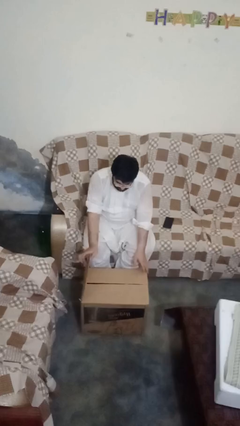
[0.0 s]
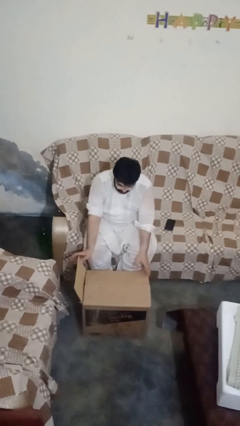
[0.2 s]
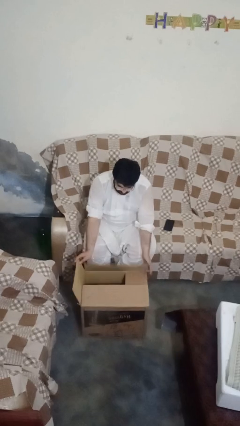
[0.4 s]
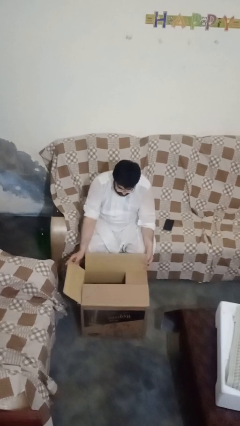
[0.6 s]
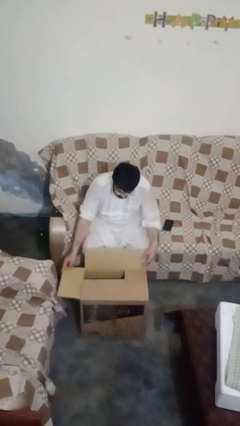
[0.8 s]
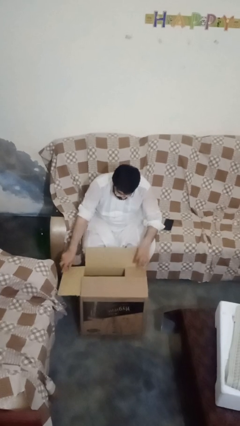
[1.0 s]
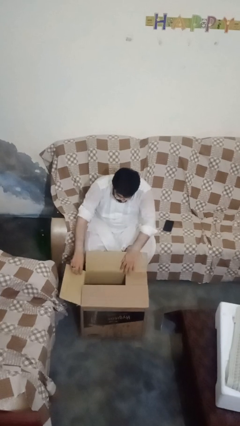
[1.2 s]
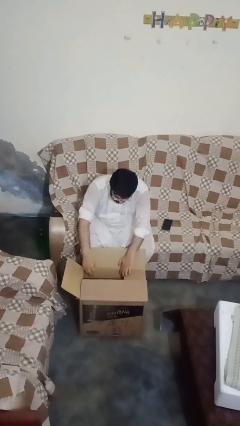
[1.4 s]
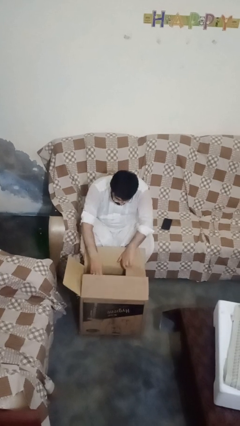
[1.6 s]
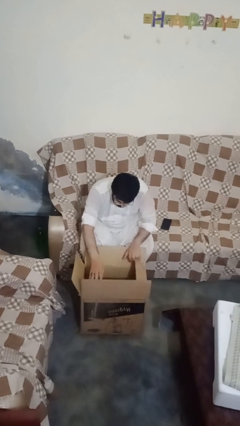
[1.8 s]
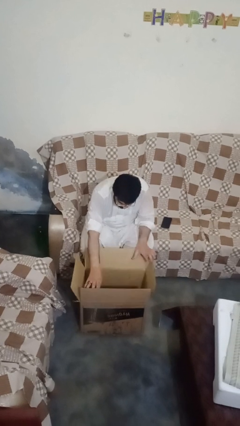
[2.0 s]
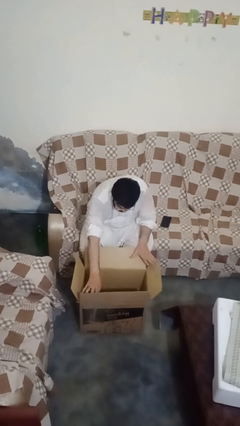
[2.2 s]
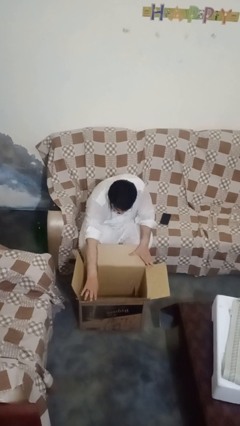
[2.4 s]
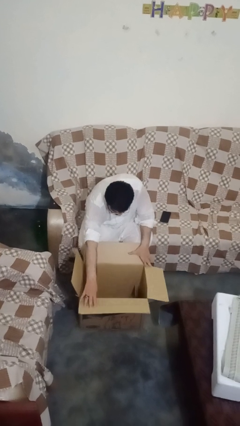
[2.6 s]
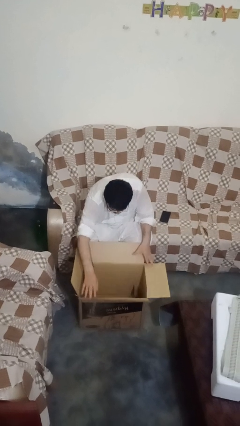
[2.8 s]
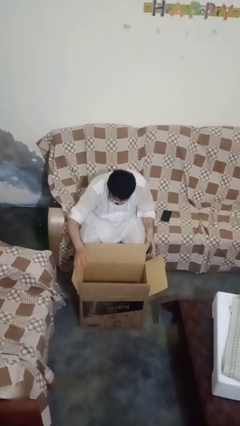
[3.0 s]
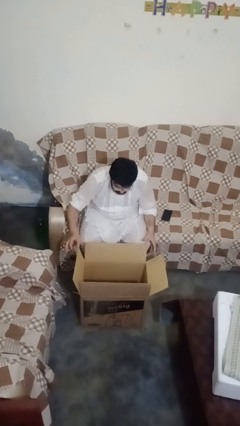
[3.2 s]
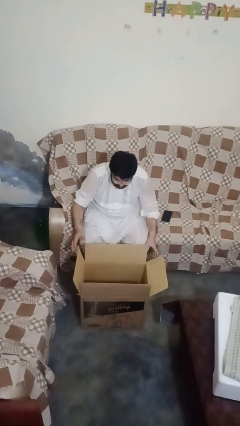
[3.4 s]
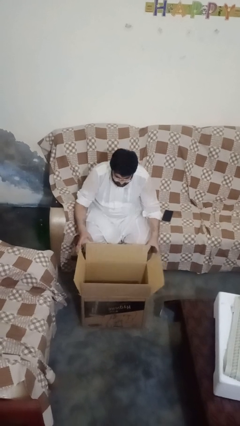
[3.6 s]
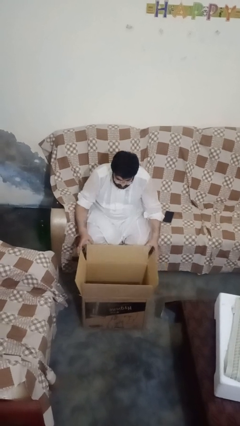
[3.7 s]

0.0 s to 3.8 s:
person opens box

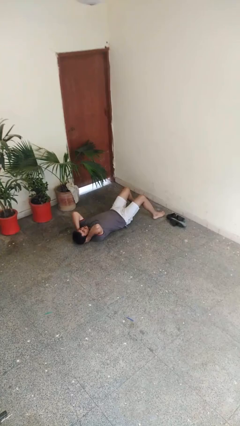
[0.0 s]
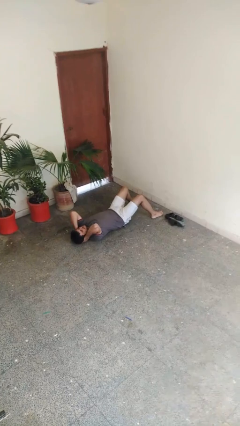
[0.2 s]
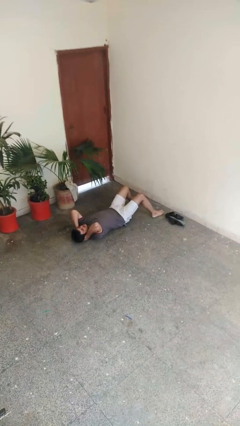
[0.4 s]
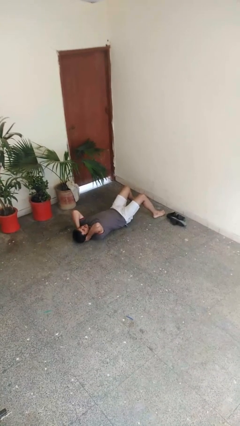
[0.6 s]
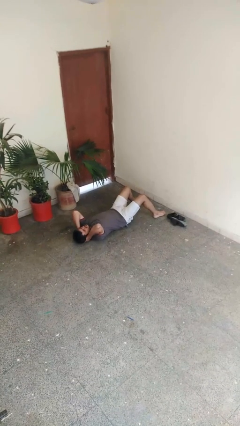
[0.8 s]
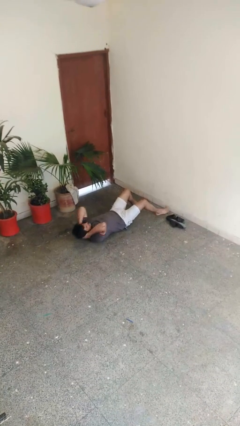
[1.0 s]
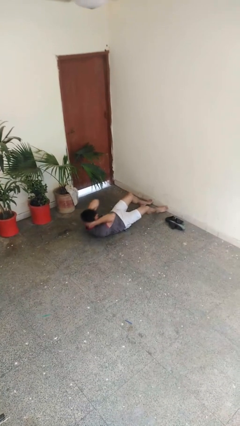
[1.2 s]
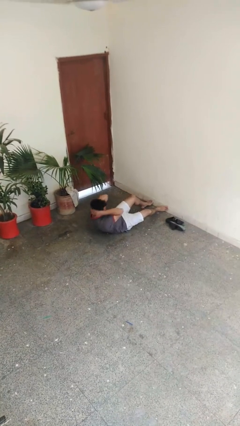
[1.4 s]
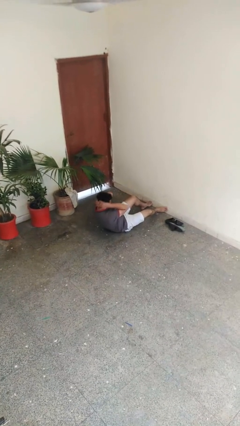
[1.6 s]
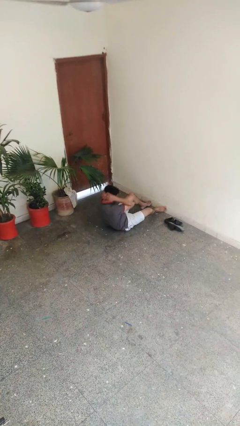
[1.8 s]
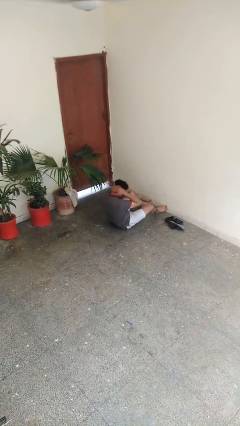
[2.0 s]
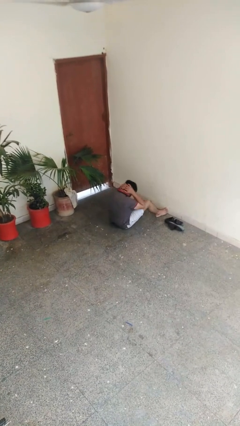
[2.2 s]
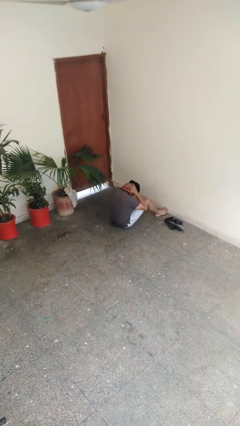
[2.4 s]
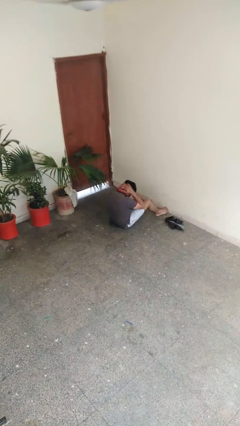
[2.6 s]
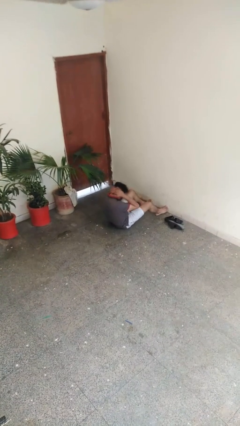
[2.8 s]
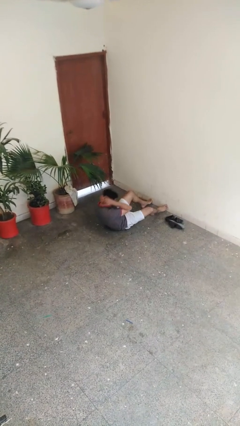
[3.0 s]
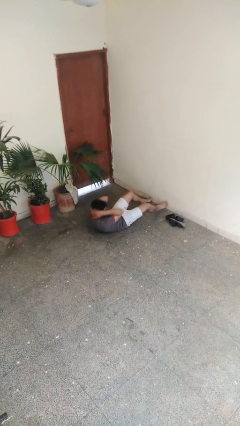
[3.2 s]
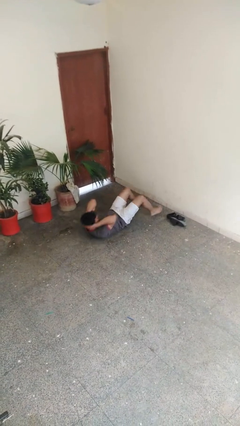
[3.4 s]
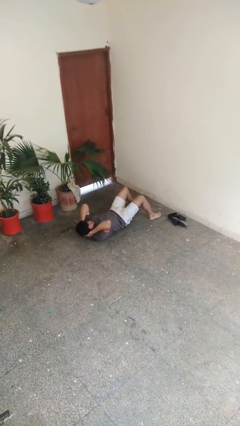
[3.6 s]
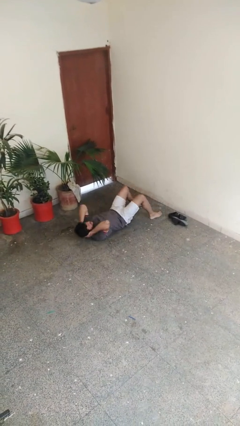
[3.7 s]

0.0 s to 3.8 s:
person exercises with situp

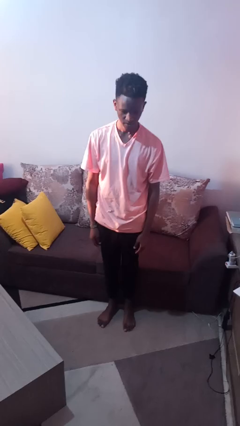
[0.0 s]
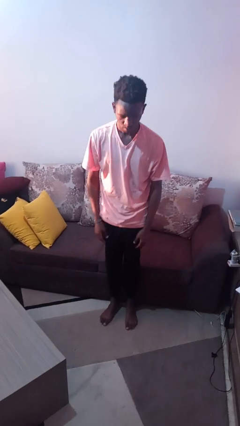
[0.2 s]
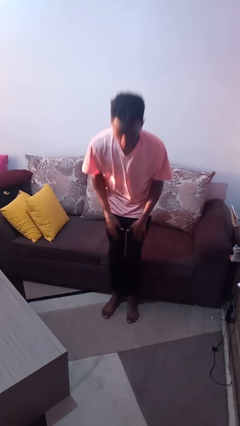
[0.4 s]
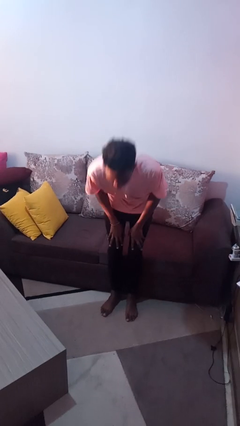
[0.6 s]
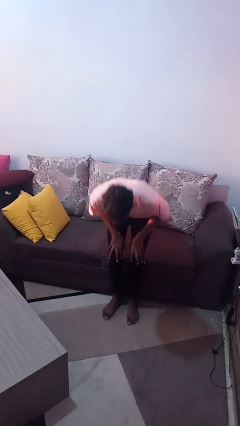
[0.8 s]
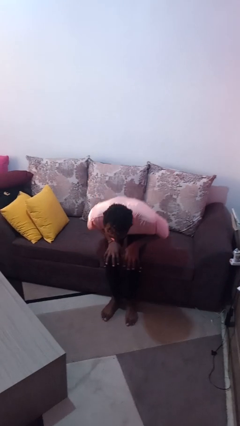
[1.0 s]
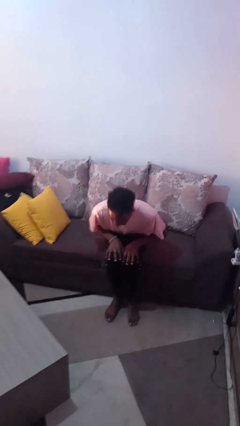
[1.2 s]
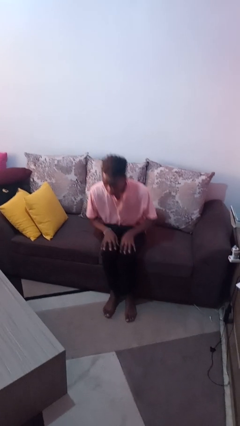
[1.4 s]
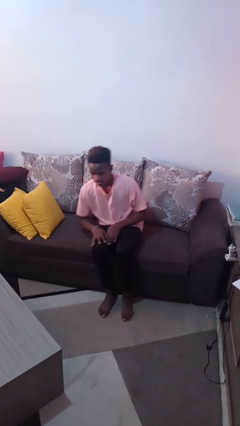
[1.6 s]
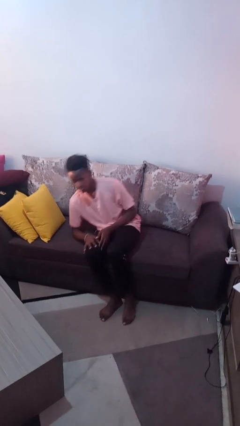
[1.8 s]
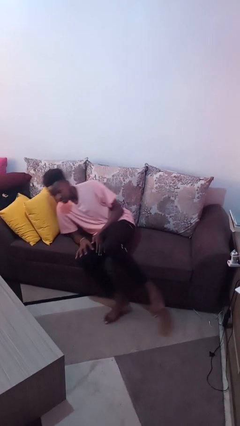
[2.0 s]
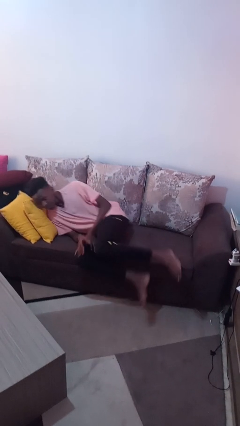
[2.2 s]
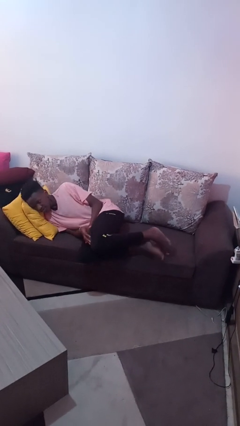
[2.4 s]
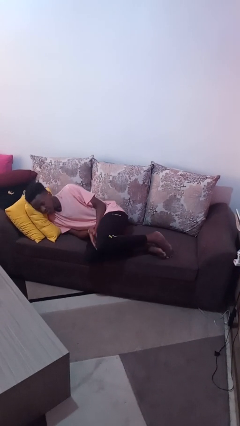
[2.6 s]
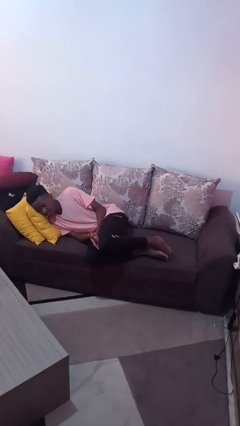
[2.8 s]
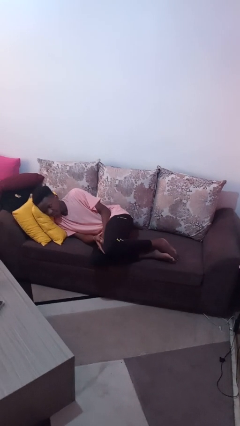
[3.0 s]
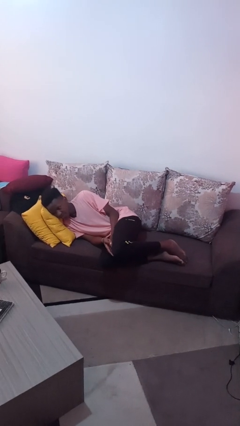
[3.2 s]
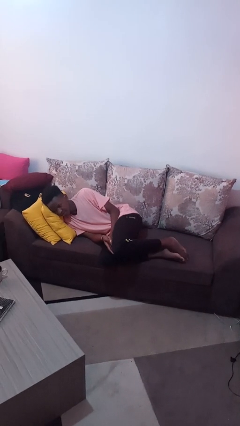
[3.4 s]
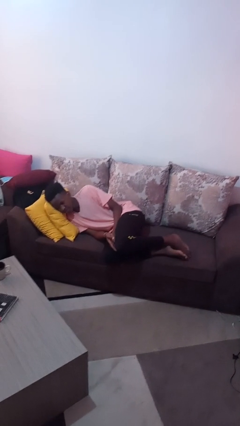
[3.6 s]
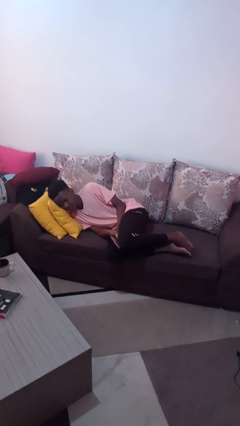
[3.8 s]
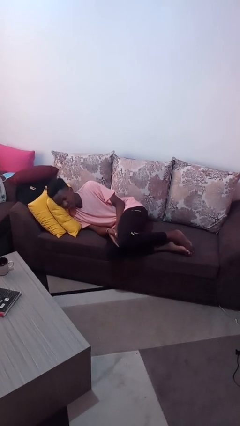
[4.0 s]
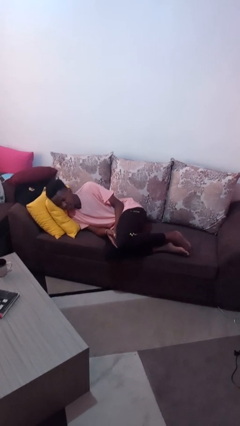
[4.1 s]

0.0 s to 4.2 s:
person lies down on couch

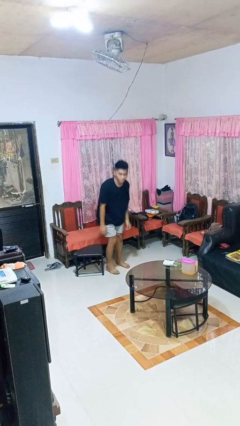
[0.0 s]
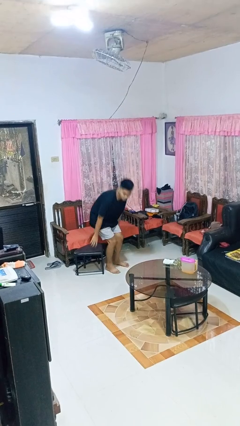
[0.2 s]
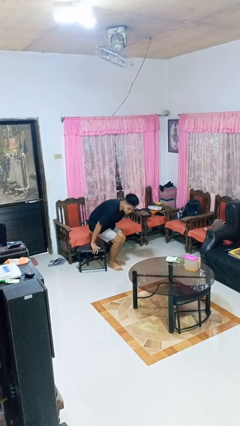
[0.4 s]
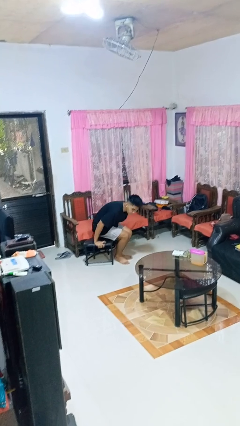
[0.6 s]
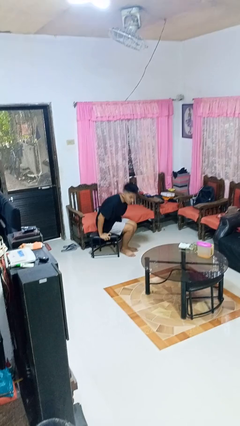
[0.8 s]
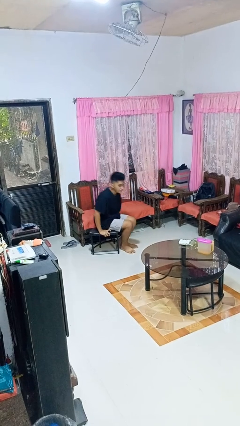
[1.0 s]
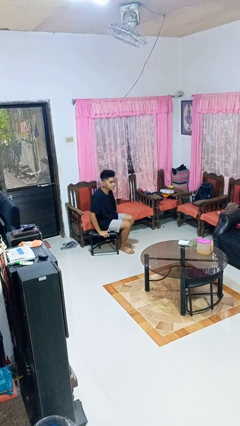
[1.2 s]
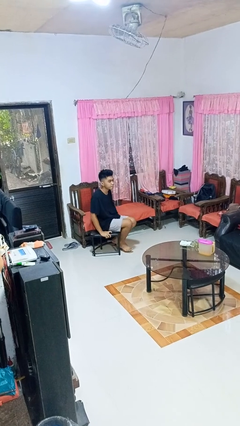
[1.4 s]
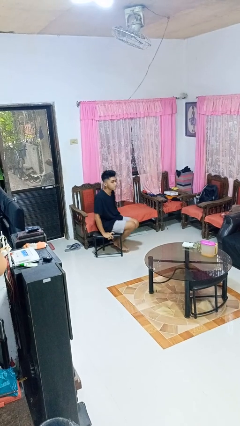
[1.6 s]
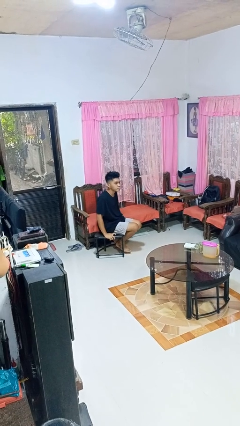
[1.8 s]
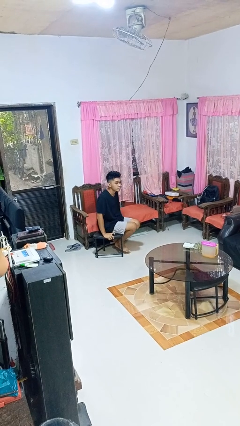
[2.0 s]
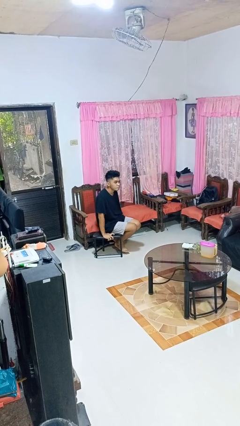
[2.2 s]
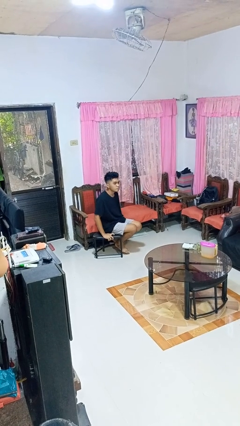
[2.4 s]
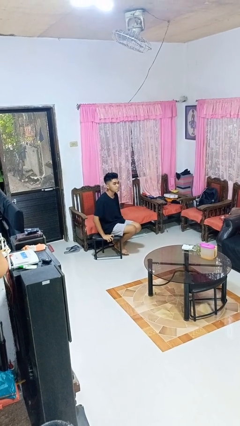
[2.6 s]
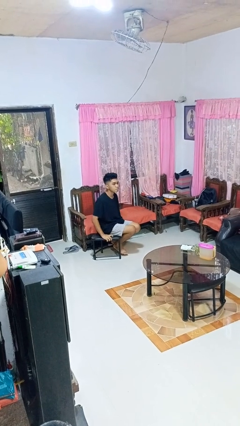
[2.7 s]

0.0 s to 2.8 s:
person sits down

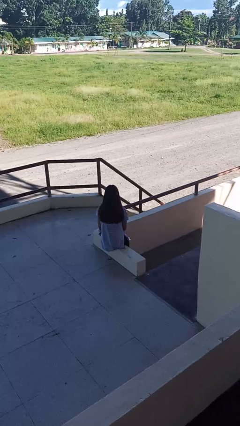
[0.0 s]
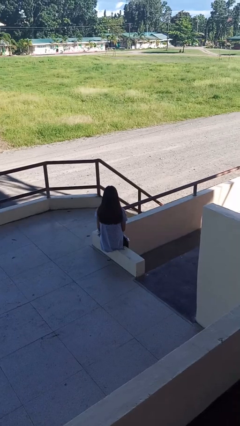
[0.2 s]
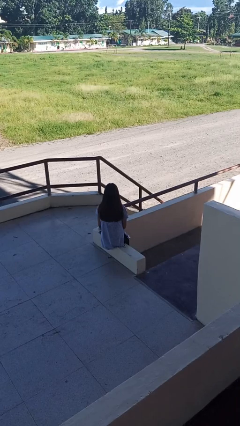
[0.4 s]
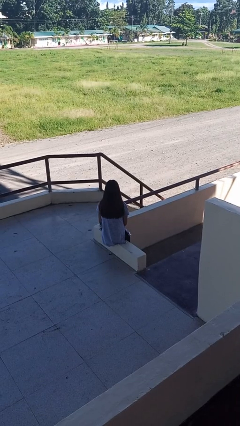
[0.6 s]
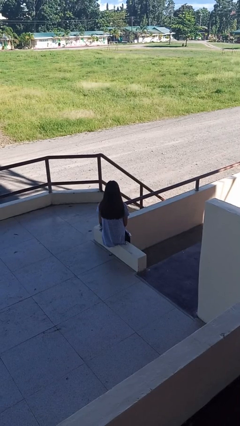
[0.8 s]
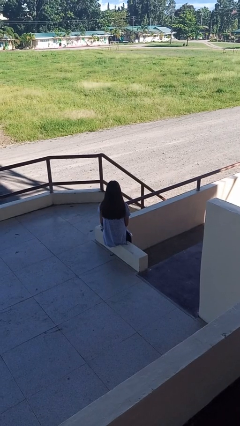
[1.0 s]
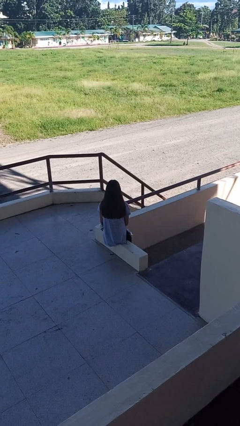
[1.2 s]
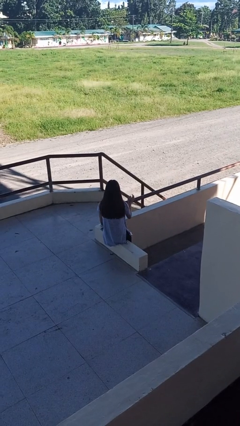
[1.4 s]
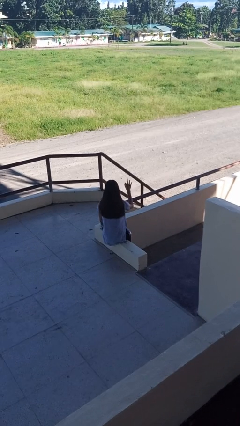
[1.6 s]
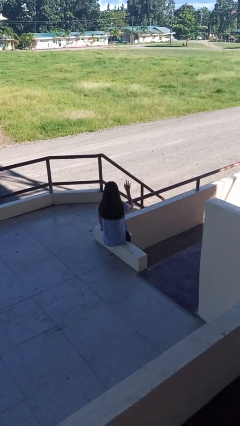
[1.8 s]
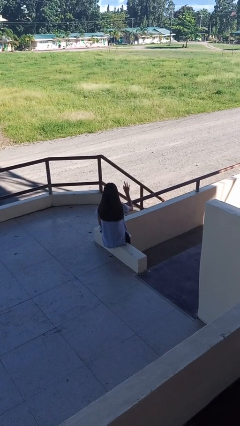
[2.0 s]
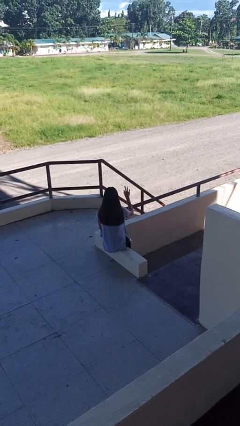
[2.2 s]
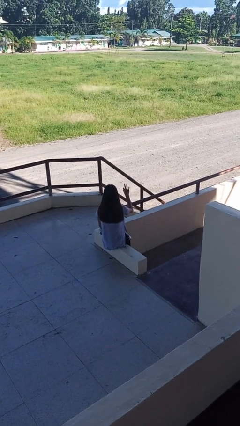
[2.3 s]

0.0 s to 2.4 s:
person gestures number three

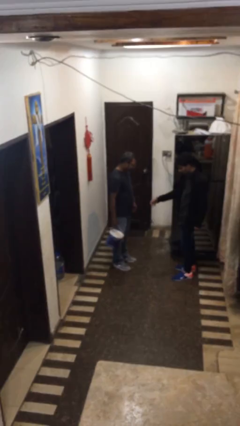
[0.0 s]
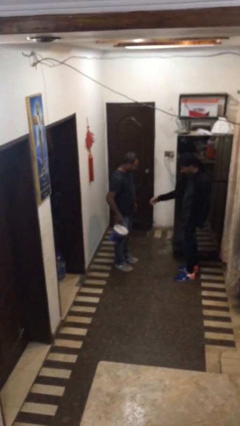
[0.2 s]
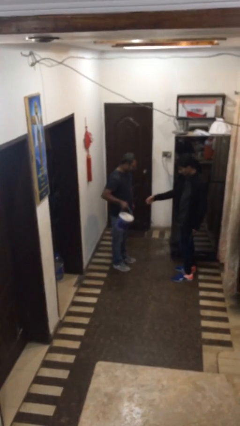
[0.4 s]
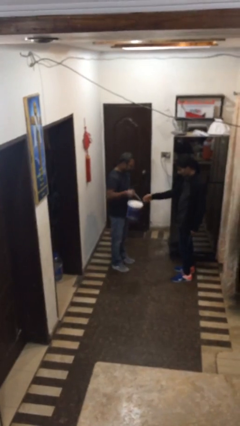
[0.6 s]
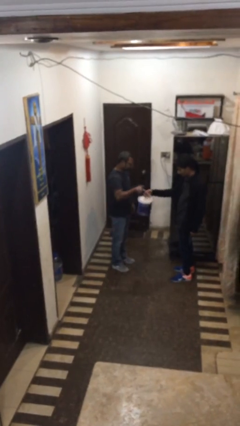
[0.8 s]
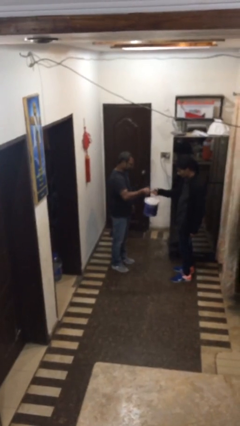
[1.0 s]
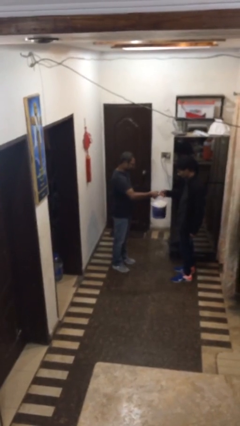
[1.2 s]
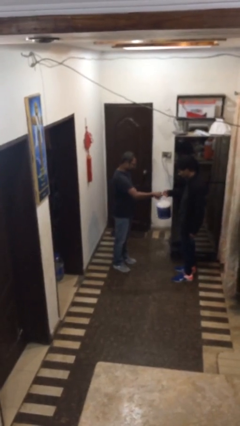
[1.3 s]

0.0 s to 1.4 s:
person transfers object to person
